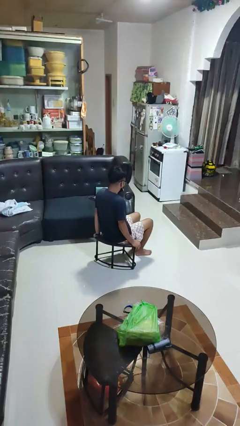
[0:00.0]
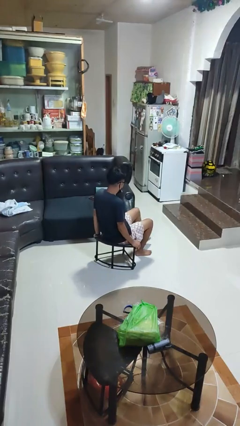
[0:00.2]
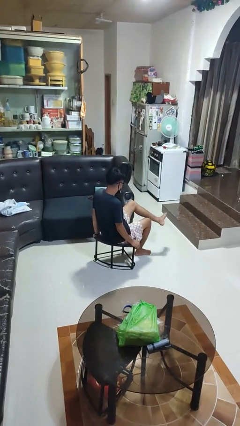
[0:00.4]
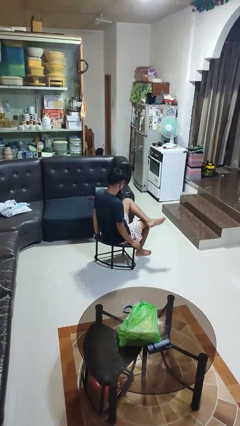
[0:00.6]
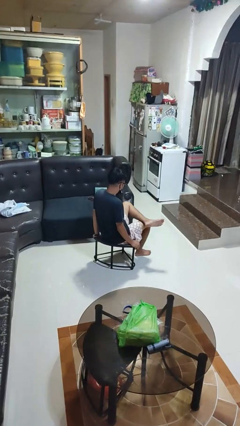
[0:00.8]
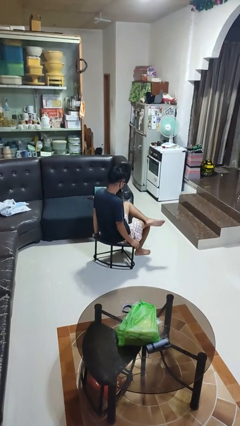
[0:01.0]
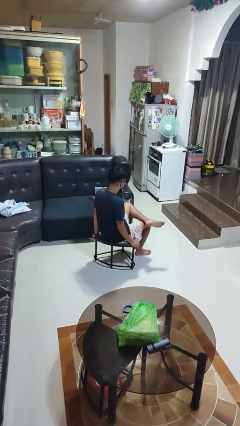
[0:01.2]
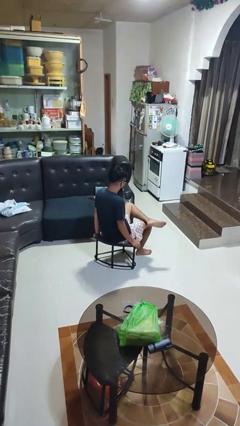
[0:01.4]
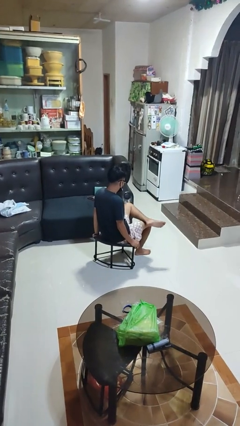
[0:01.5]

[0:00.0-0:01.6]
person crosses legs

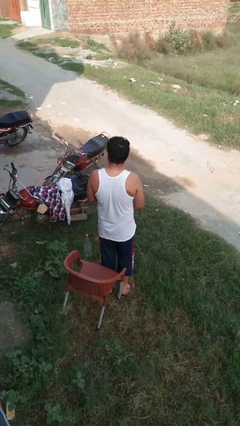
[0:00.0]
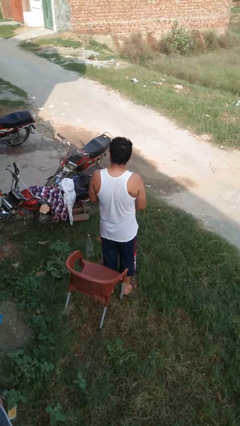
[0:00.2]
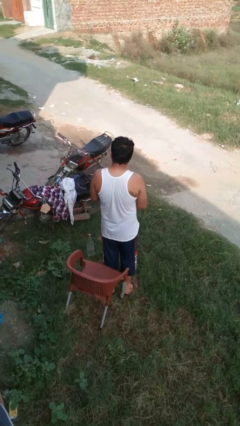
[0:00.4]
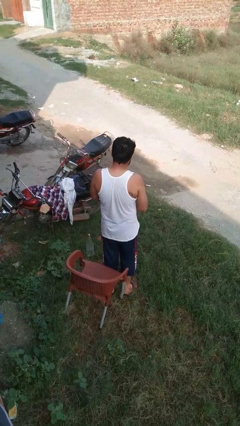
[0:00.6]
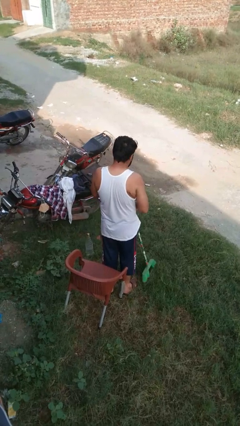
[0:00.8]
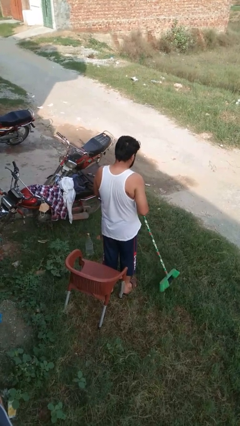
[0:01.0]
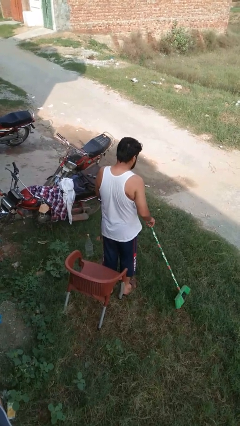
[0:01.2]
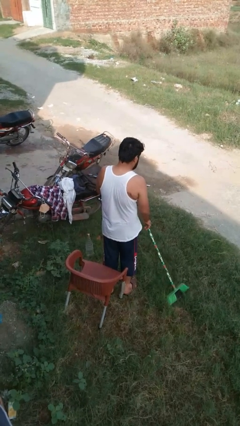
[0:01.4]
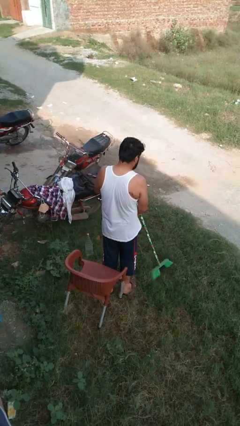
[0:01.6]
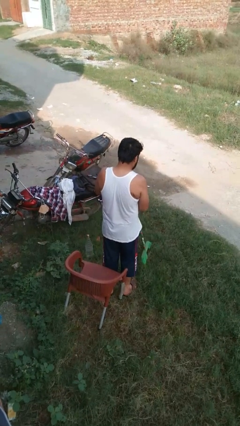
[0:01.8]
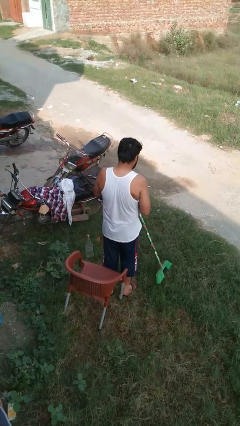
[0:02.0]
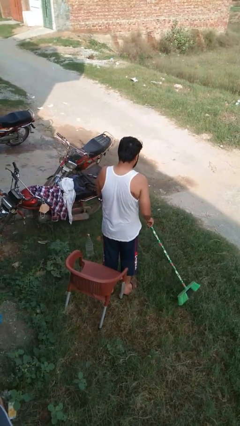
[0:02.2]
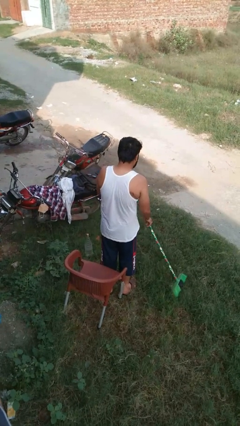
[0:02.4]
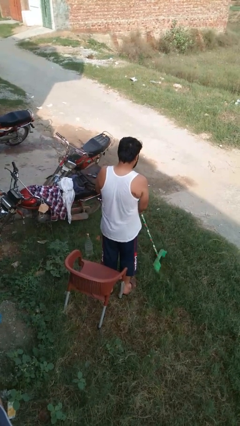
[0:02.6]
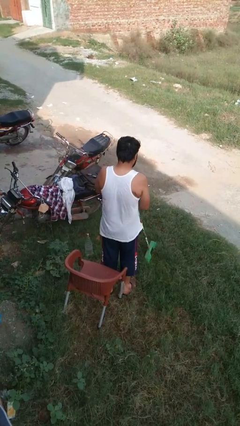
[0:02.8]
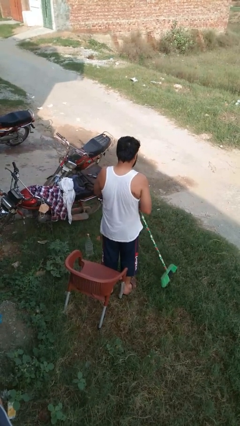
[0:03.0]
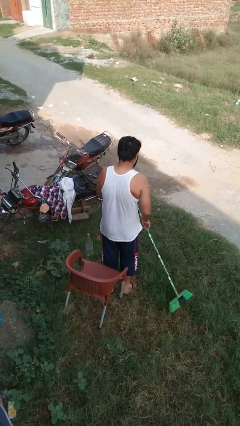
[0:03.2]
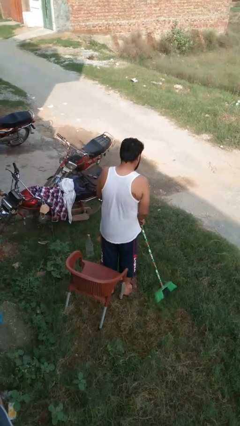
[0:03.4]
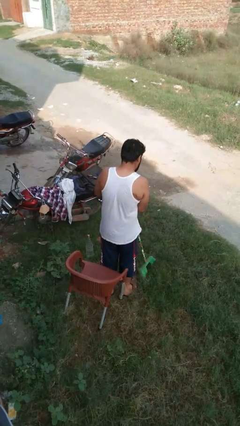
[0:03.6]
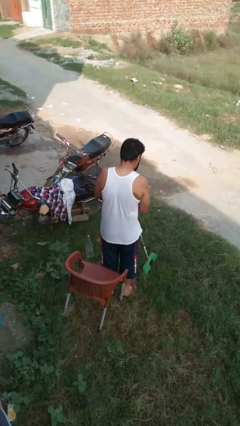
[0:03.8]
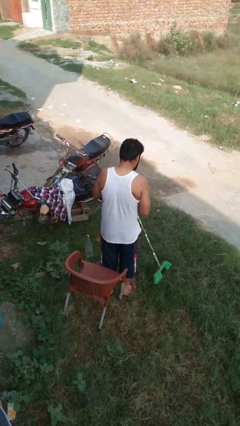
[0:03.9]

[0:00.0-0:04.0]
person sweeps floor

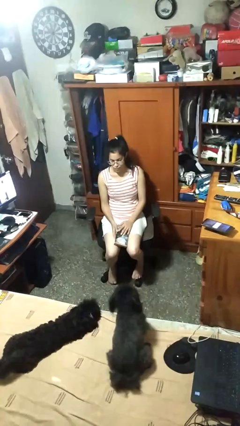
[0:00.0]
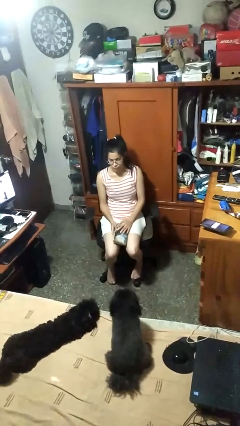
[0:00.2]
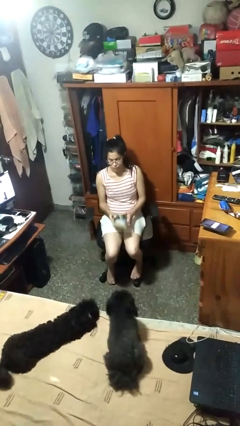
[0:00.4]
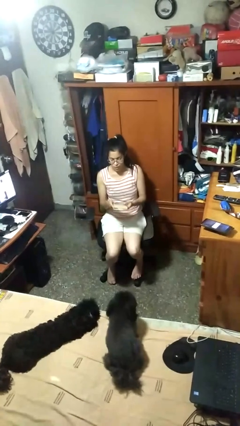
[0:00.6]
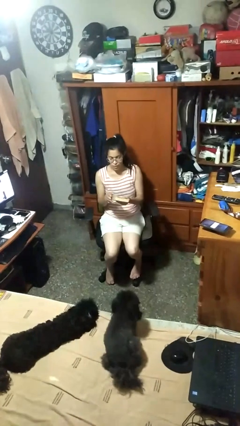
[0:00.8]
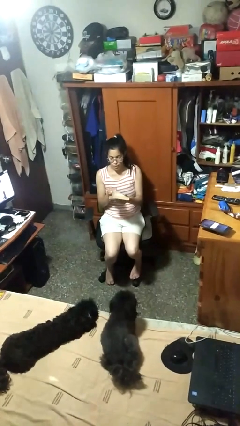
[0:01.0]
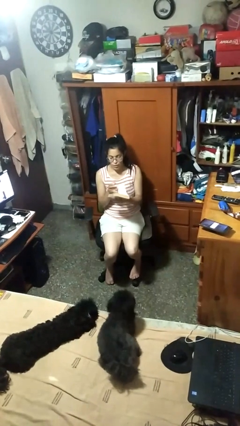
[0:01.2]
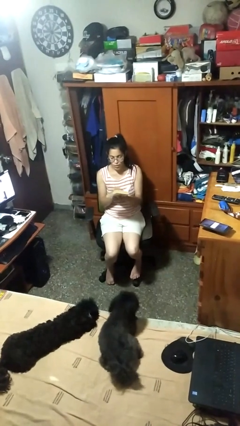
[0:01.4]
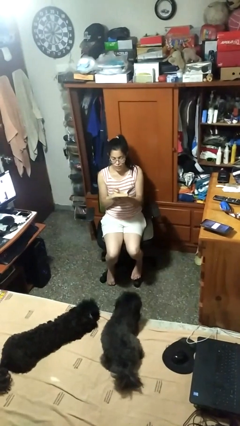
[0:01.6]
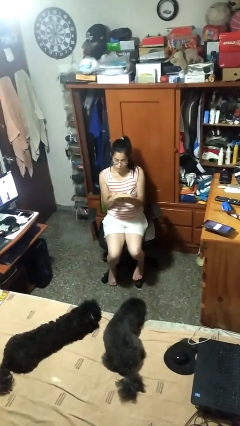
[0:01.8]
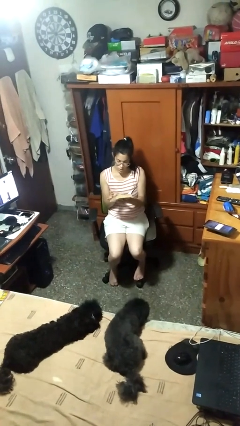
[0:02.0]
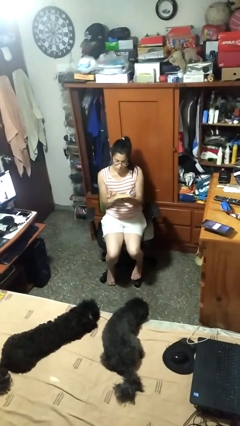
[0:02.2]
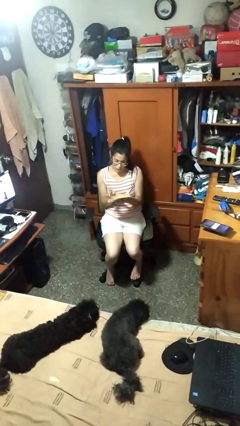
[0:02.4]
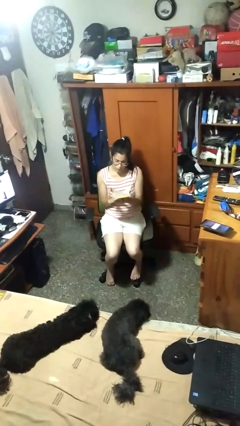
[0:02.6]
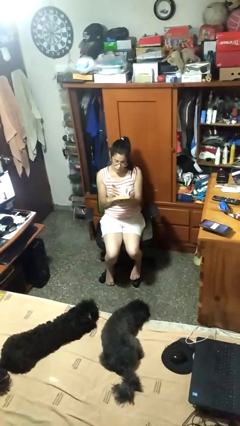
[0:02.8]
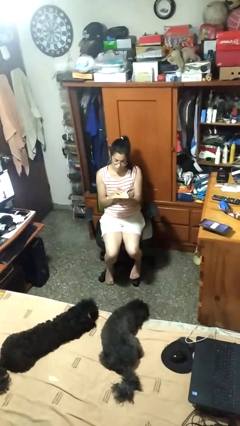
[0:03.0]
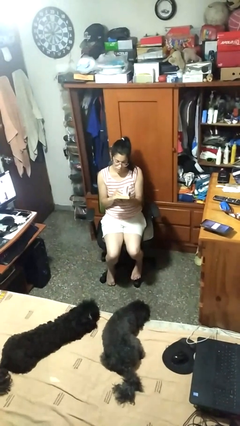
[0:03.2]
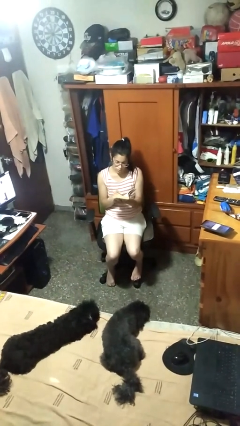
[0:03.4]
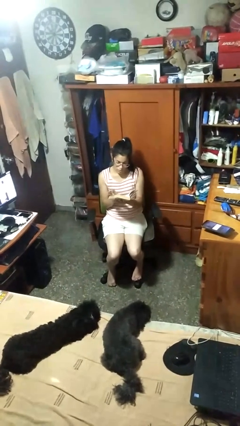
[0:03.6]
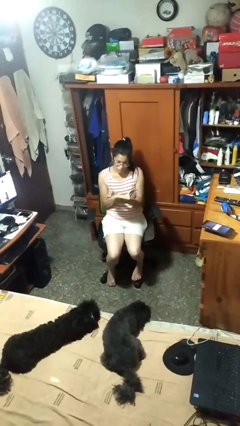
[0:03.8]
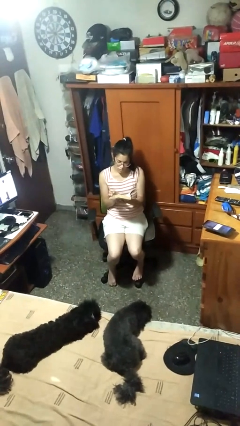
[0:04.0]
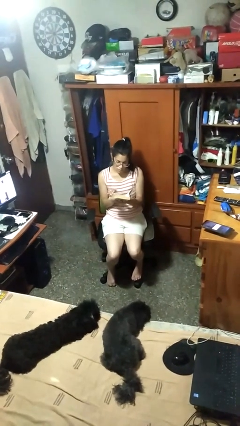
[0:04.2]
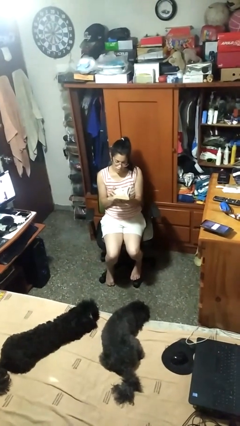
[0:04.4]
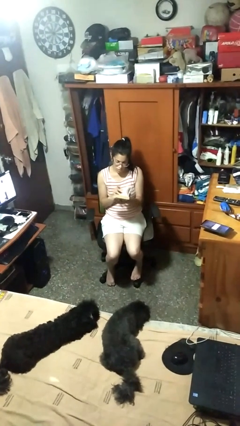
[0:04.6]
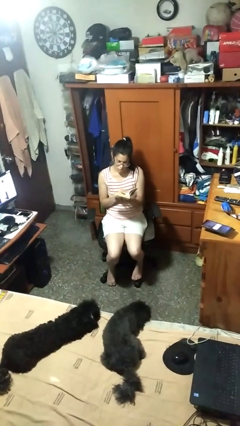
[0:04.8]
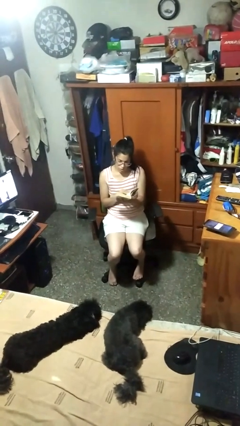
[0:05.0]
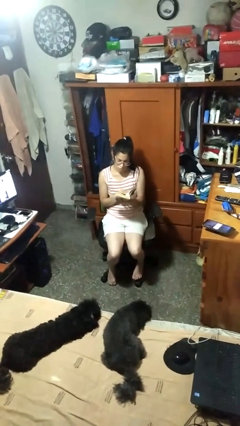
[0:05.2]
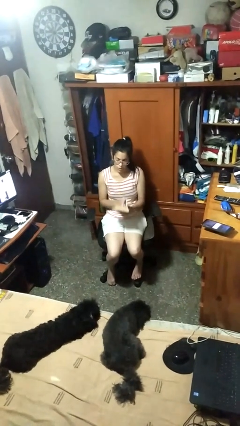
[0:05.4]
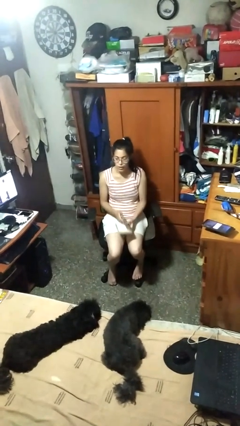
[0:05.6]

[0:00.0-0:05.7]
person reads book

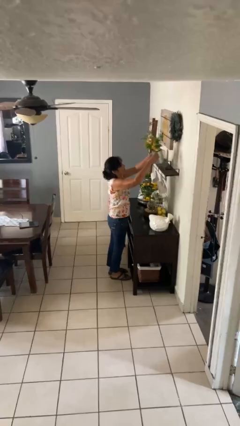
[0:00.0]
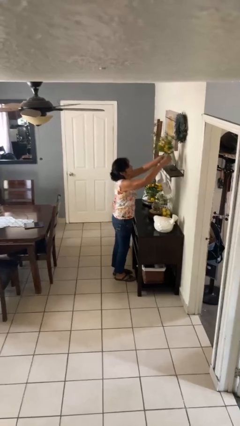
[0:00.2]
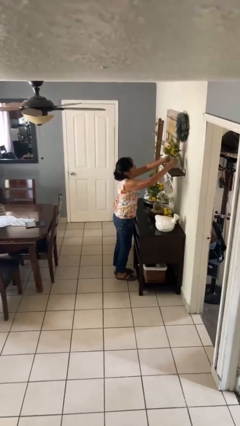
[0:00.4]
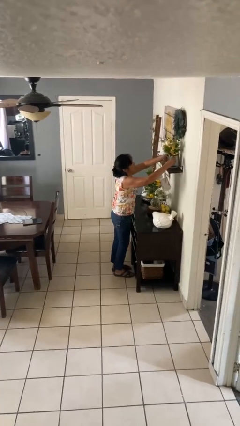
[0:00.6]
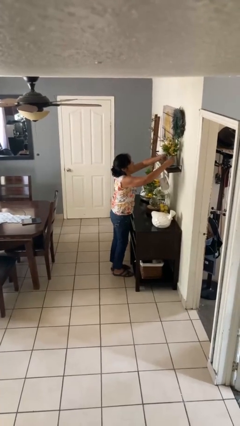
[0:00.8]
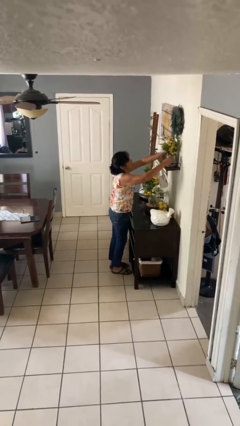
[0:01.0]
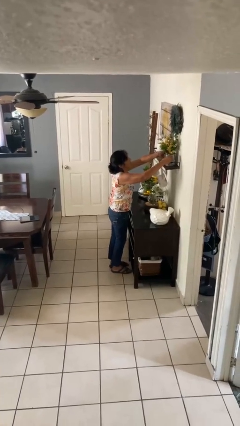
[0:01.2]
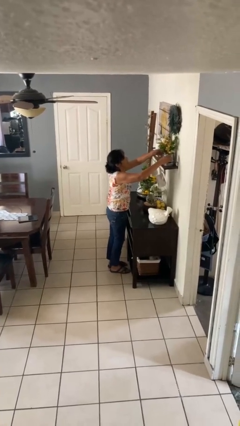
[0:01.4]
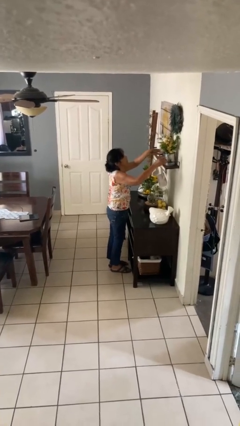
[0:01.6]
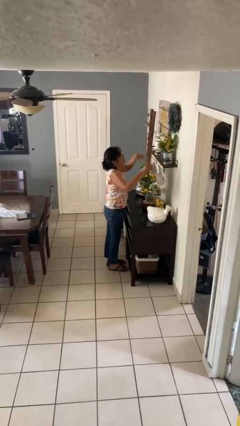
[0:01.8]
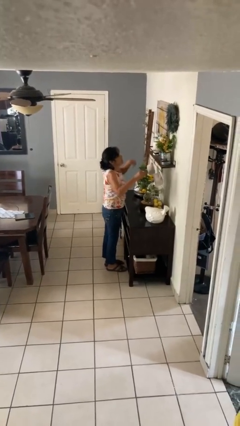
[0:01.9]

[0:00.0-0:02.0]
person puts down object on countertop

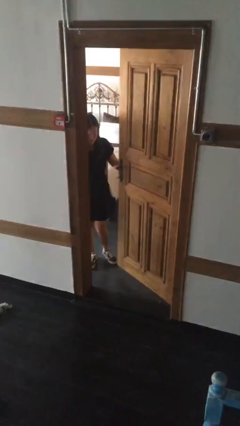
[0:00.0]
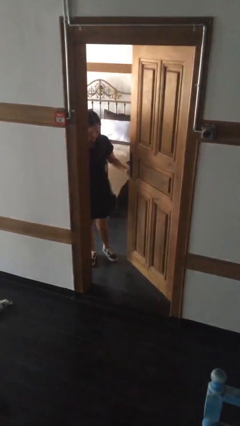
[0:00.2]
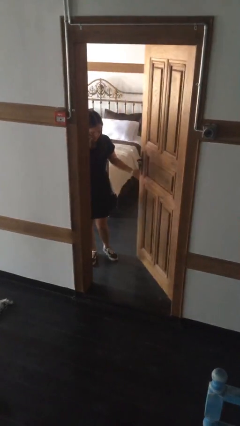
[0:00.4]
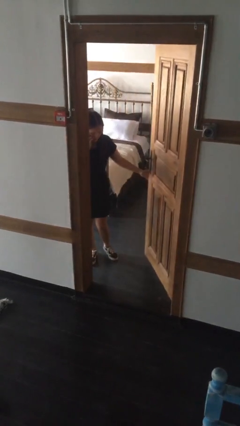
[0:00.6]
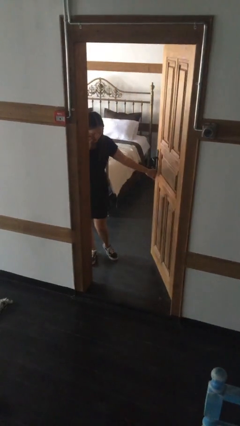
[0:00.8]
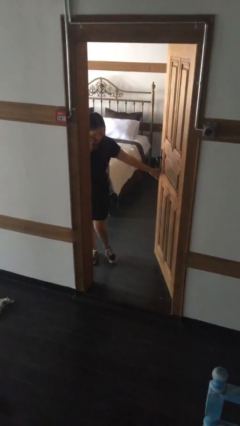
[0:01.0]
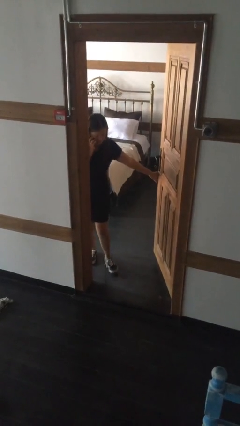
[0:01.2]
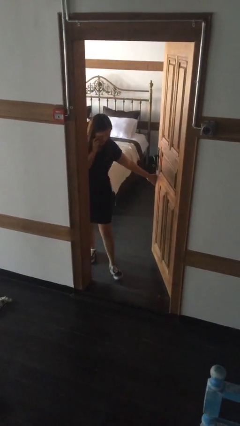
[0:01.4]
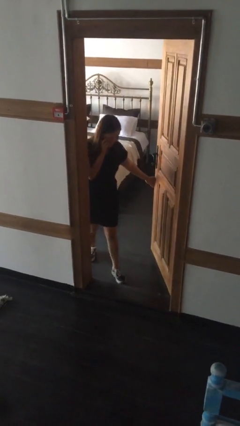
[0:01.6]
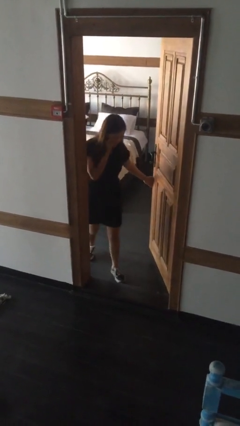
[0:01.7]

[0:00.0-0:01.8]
person opens facility door

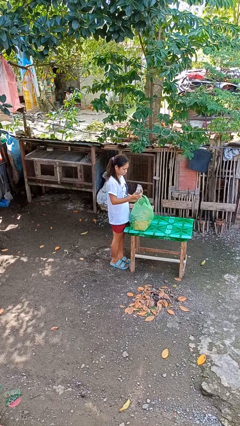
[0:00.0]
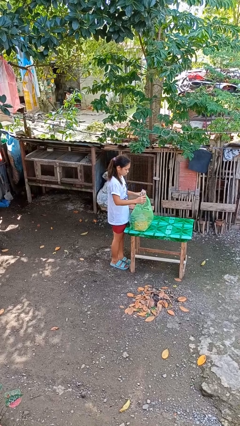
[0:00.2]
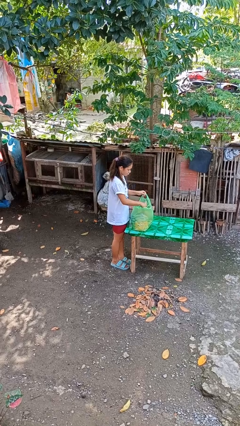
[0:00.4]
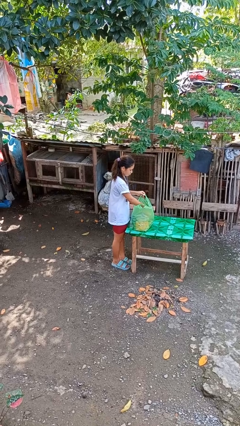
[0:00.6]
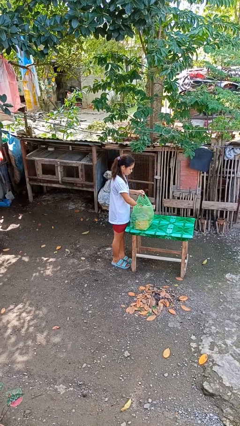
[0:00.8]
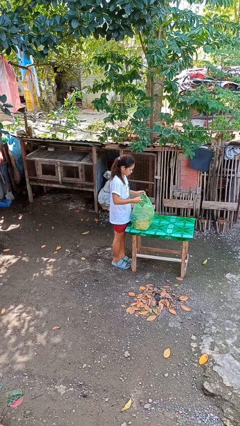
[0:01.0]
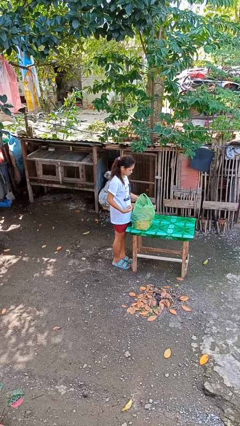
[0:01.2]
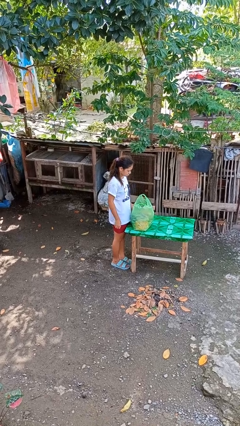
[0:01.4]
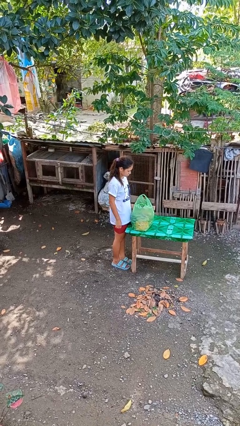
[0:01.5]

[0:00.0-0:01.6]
person puts object into bag

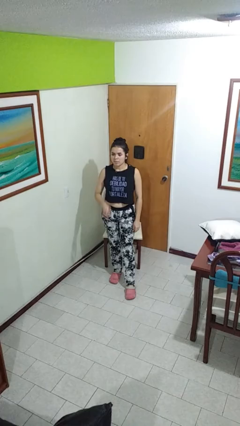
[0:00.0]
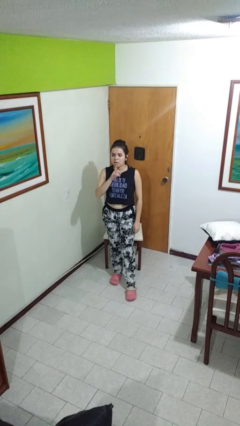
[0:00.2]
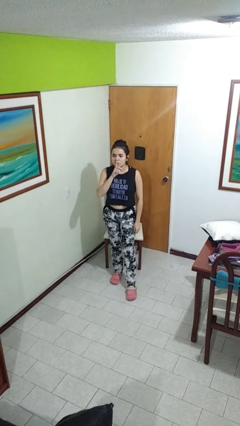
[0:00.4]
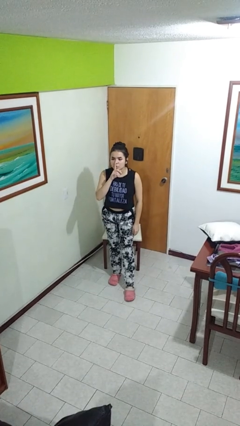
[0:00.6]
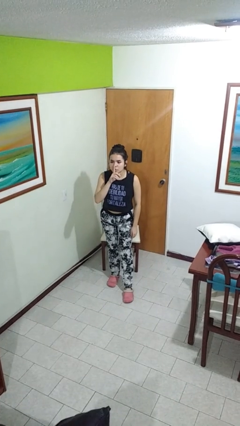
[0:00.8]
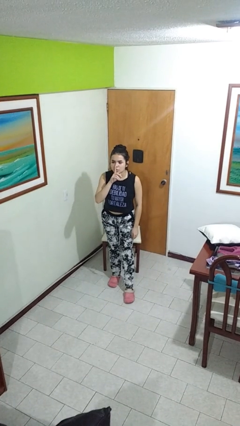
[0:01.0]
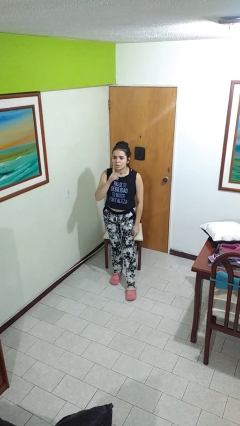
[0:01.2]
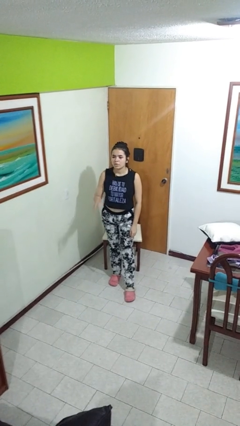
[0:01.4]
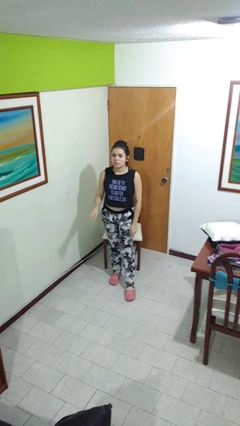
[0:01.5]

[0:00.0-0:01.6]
person gestures be quiet
